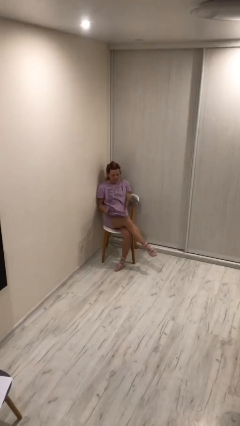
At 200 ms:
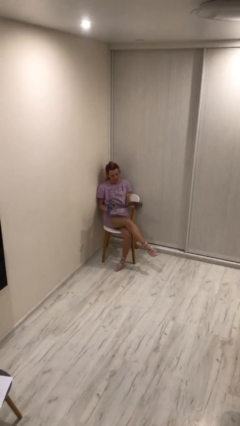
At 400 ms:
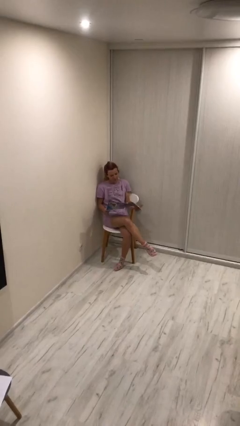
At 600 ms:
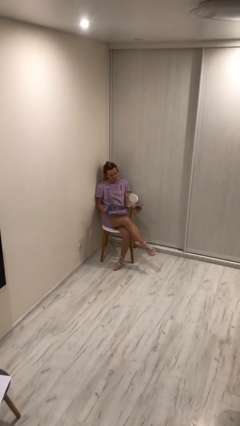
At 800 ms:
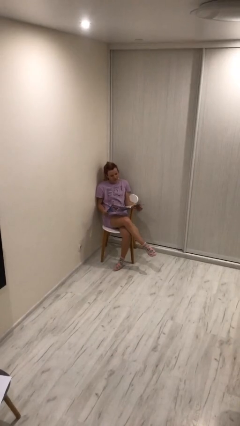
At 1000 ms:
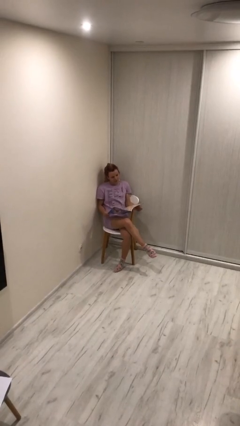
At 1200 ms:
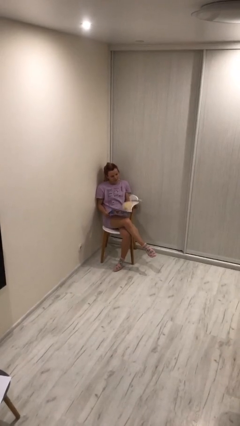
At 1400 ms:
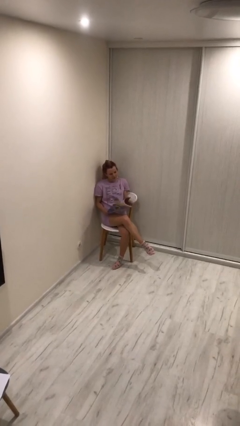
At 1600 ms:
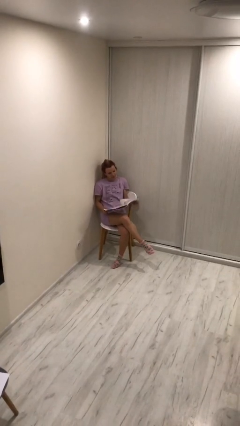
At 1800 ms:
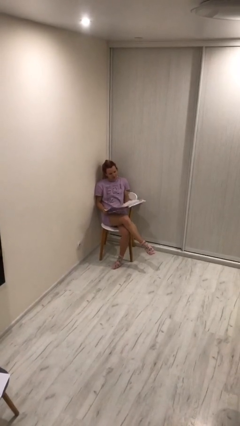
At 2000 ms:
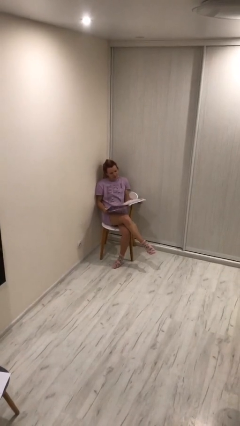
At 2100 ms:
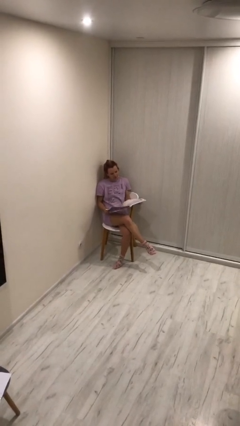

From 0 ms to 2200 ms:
person reads magazine

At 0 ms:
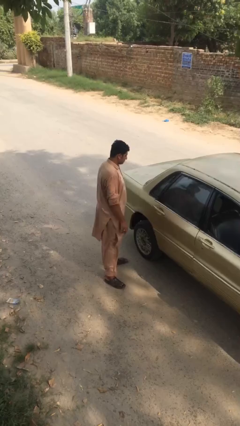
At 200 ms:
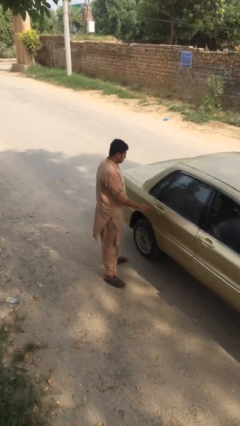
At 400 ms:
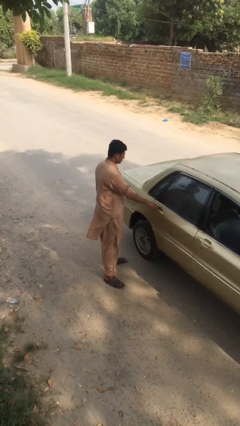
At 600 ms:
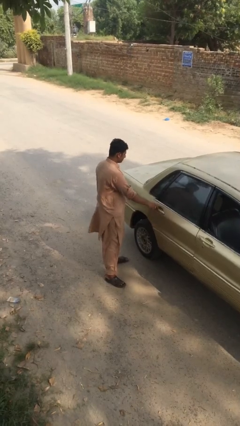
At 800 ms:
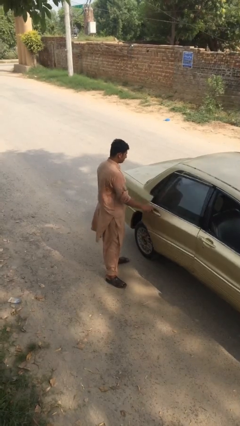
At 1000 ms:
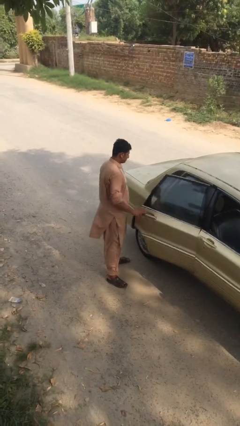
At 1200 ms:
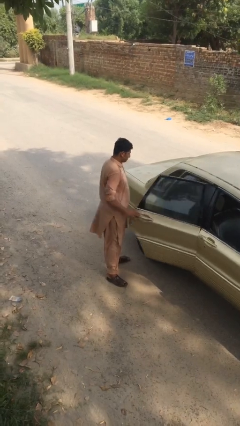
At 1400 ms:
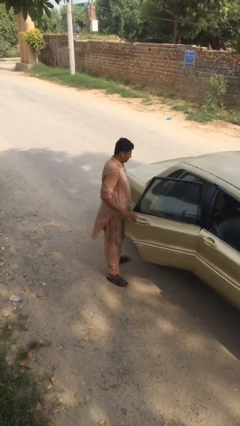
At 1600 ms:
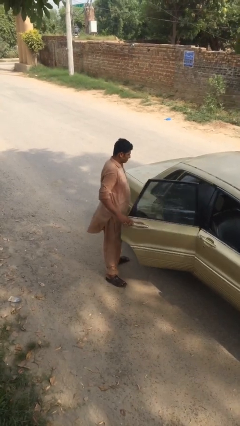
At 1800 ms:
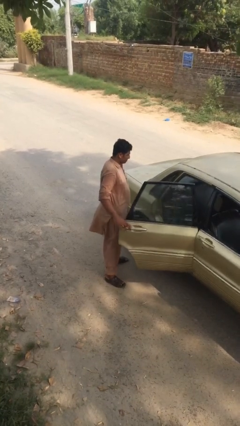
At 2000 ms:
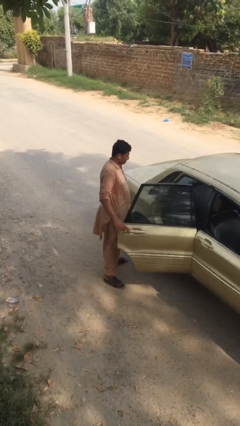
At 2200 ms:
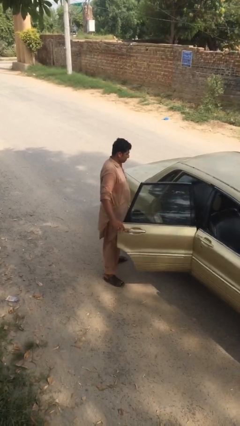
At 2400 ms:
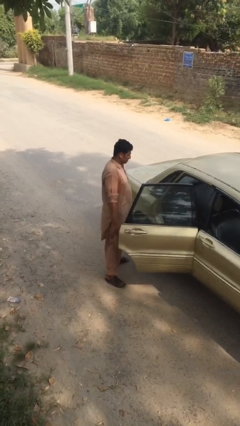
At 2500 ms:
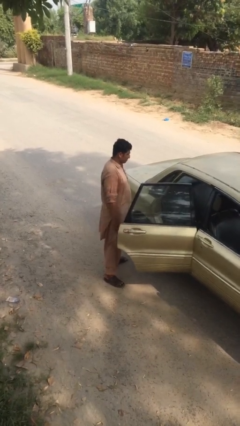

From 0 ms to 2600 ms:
person opens car door

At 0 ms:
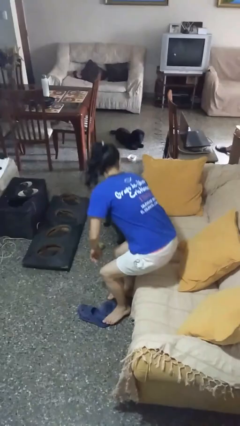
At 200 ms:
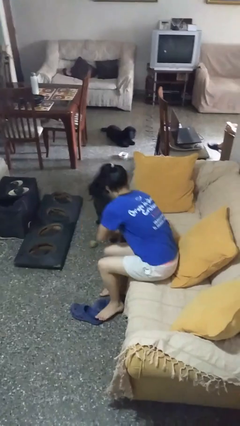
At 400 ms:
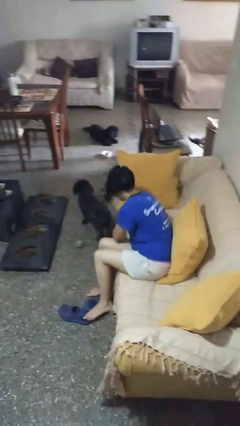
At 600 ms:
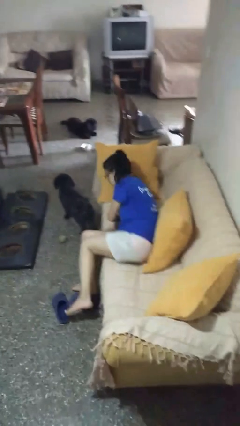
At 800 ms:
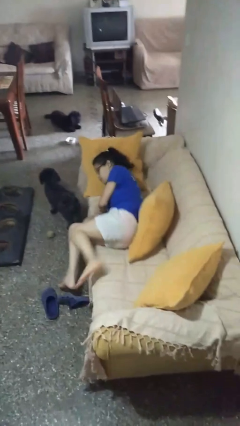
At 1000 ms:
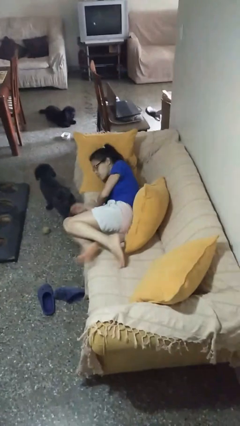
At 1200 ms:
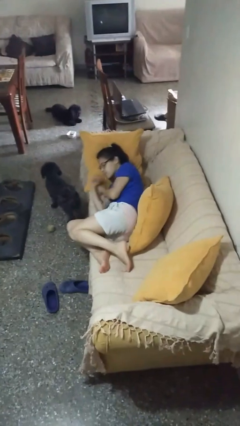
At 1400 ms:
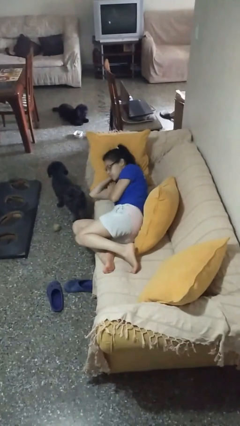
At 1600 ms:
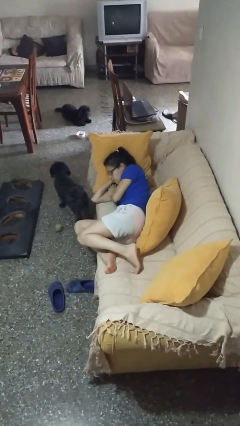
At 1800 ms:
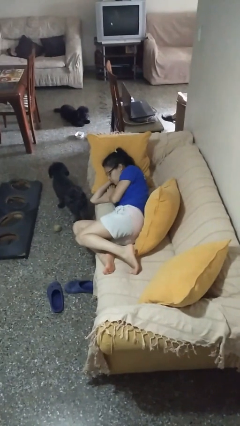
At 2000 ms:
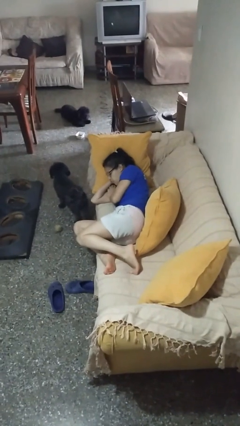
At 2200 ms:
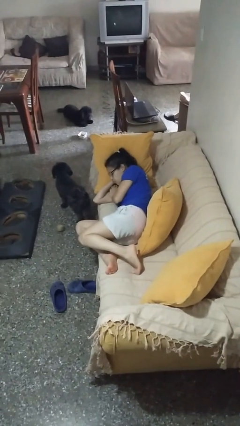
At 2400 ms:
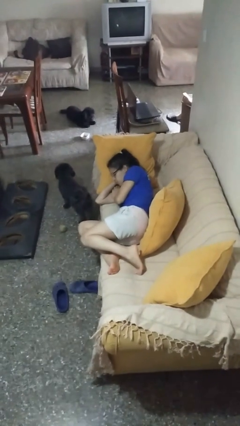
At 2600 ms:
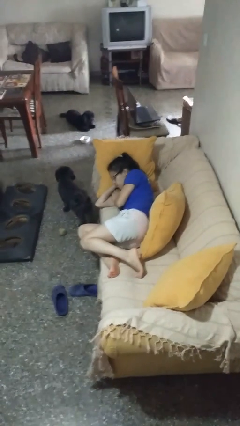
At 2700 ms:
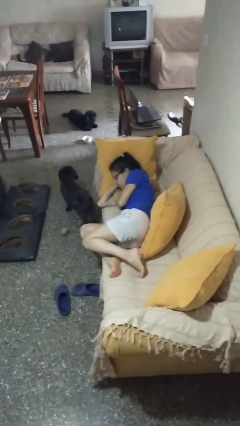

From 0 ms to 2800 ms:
person lies down on couch

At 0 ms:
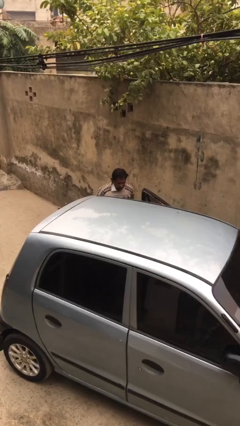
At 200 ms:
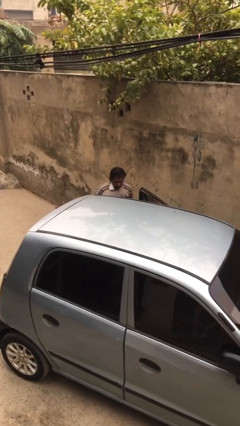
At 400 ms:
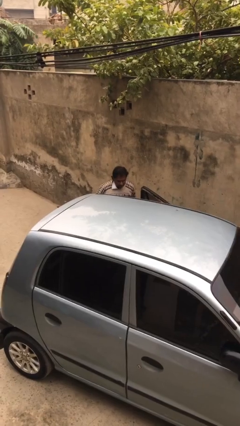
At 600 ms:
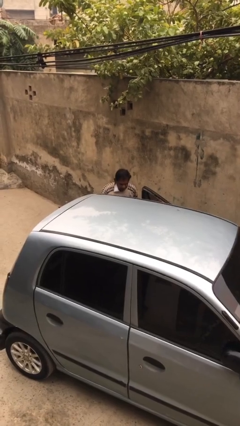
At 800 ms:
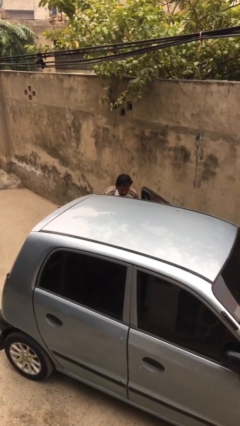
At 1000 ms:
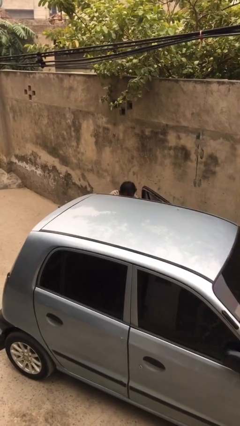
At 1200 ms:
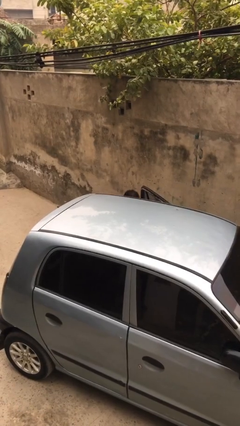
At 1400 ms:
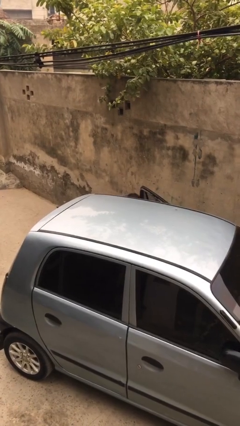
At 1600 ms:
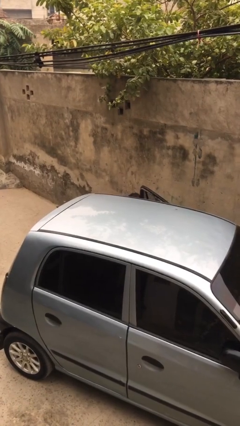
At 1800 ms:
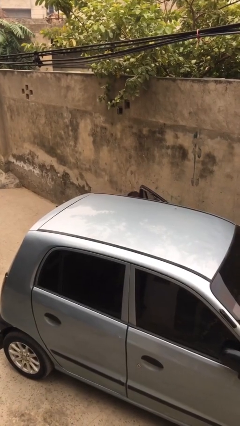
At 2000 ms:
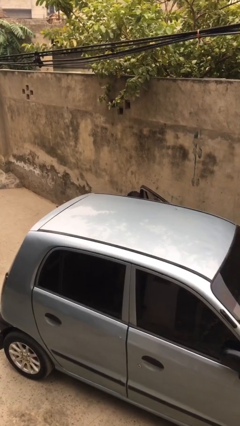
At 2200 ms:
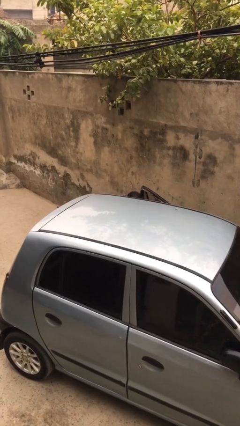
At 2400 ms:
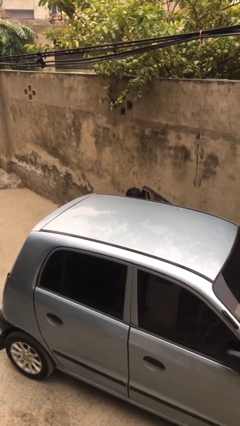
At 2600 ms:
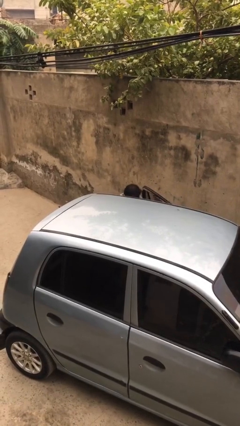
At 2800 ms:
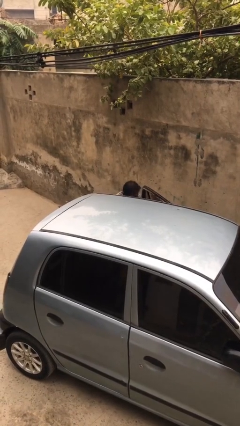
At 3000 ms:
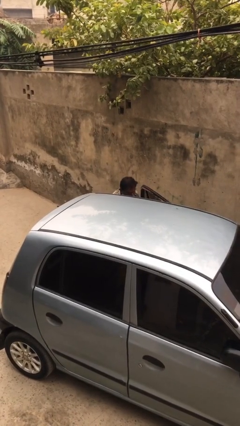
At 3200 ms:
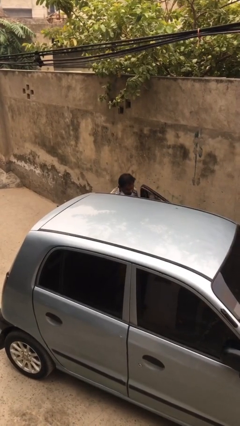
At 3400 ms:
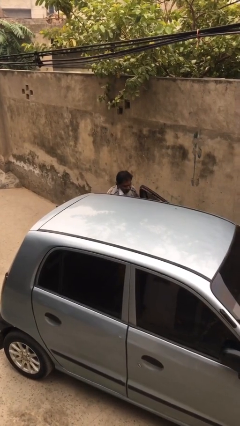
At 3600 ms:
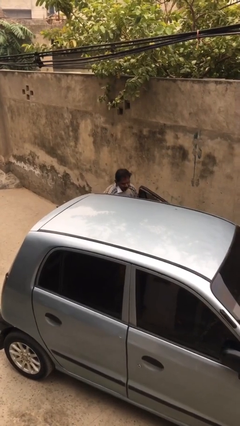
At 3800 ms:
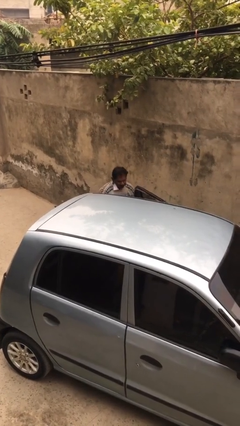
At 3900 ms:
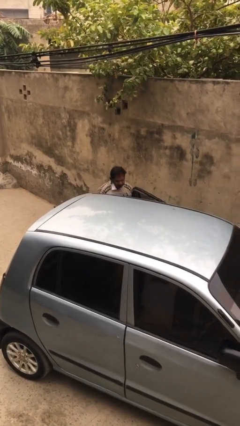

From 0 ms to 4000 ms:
person unloads car

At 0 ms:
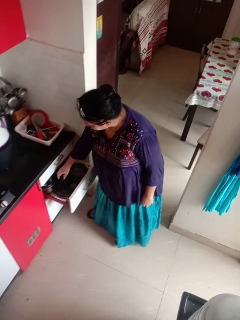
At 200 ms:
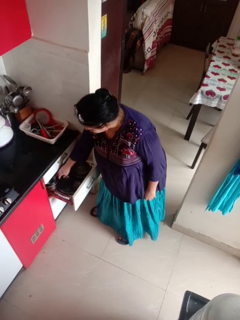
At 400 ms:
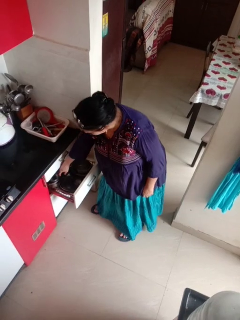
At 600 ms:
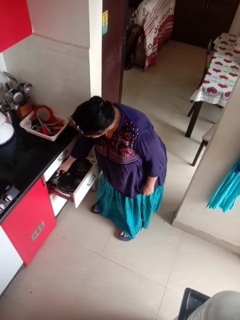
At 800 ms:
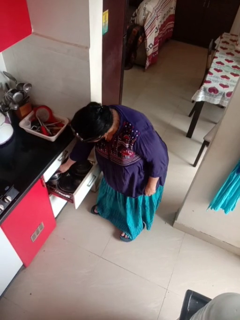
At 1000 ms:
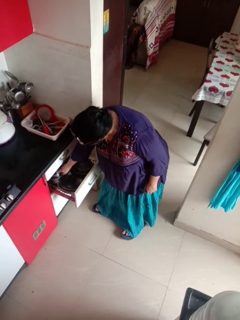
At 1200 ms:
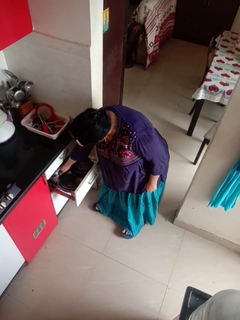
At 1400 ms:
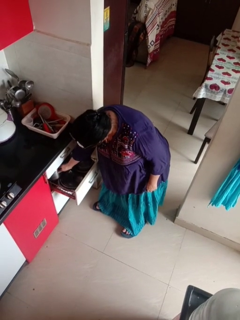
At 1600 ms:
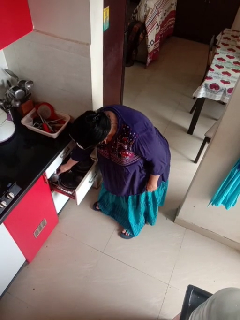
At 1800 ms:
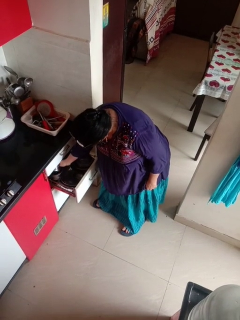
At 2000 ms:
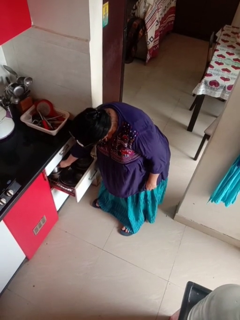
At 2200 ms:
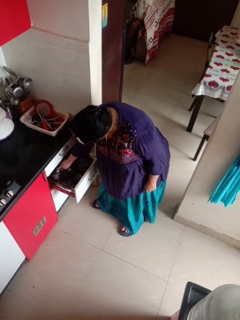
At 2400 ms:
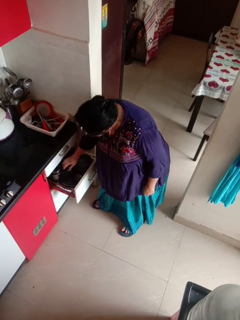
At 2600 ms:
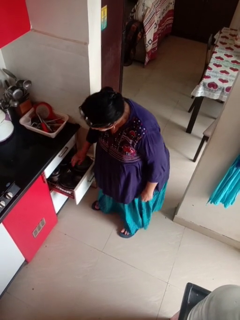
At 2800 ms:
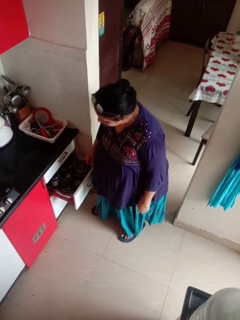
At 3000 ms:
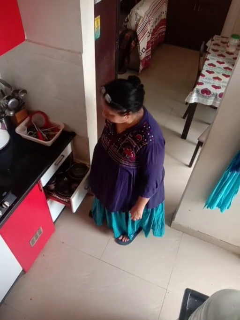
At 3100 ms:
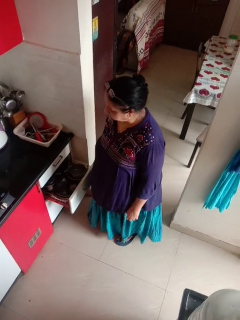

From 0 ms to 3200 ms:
person searches in kitchen drawer

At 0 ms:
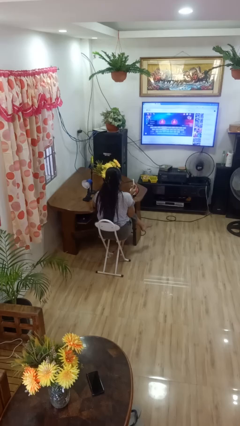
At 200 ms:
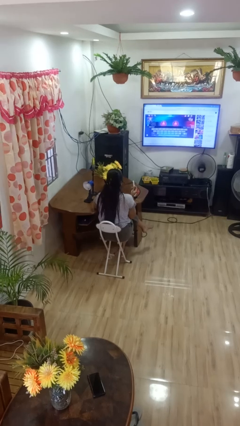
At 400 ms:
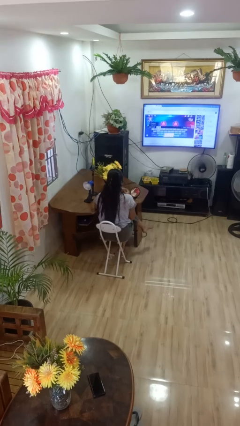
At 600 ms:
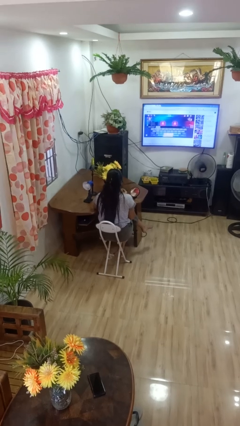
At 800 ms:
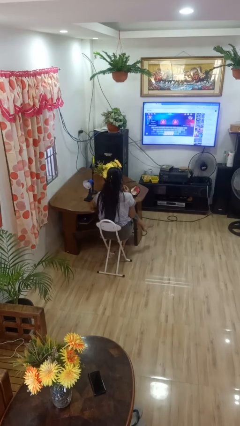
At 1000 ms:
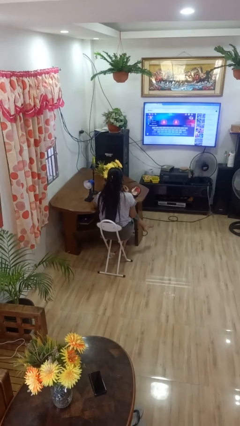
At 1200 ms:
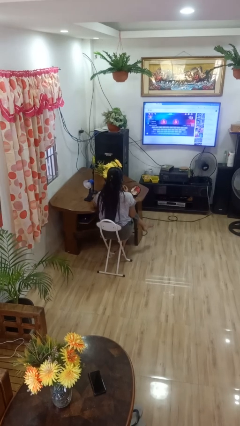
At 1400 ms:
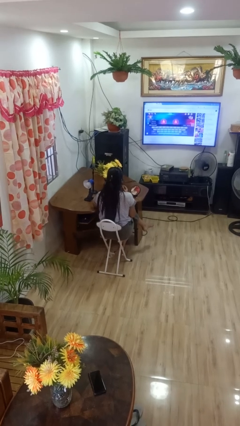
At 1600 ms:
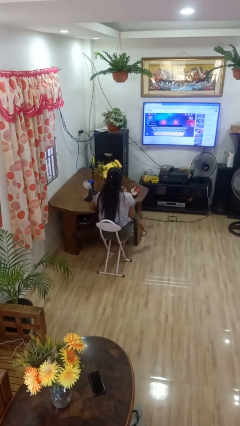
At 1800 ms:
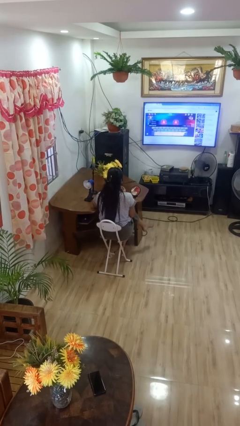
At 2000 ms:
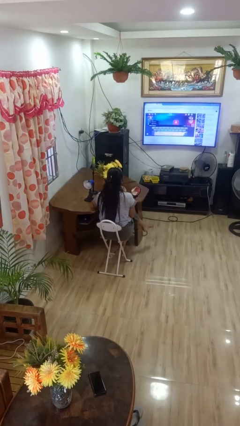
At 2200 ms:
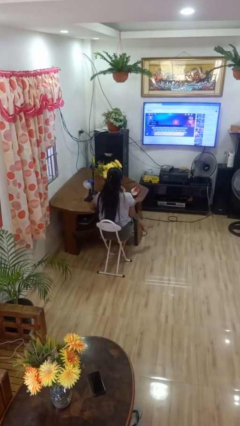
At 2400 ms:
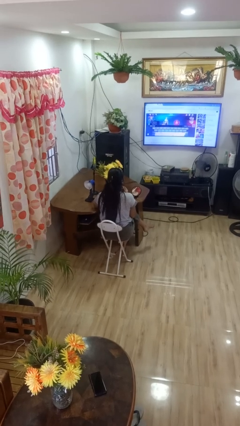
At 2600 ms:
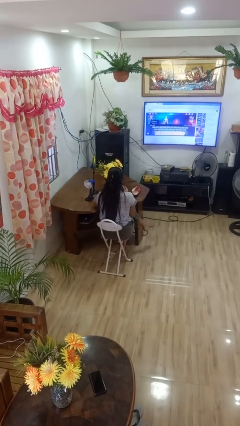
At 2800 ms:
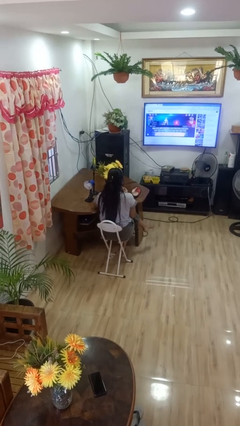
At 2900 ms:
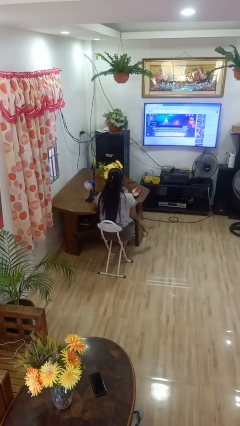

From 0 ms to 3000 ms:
person applies lip makeup
